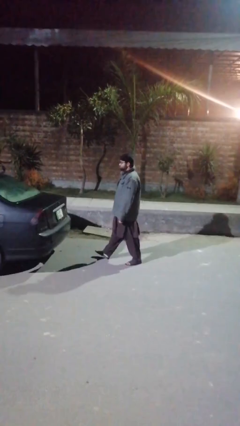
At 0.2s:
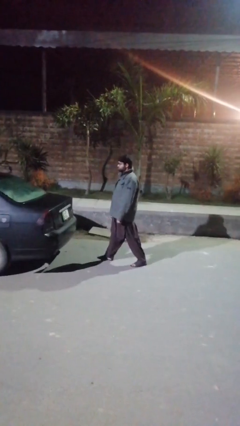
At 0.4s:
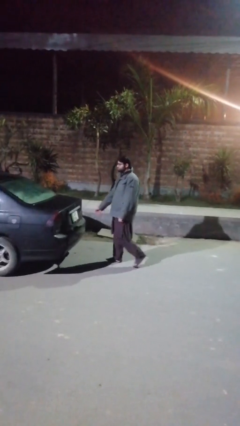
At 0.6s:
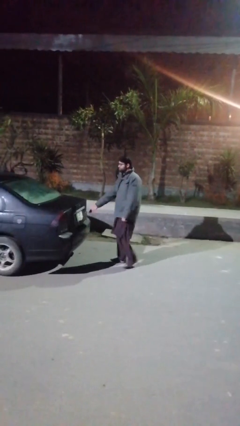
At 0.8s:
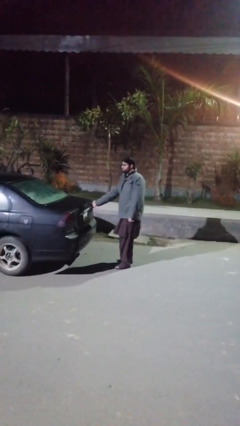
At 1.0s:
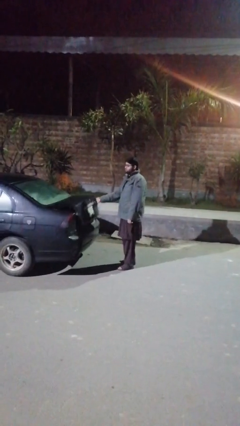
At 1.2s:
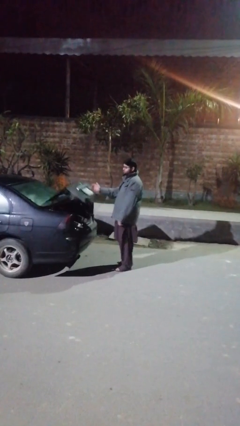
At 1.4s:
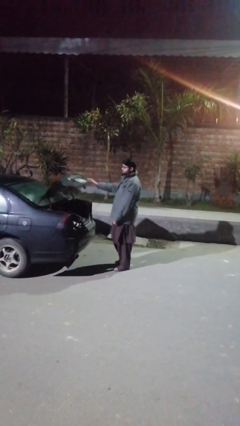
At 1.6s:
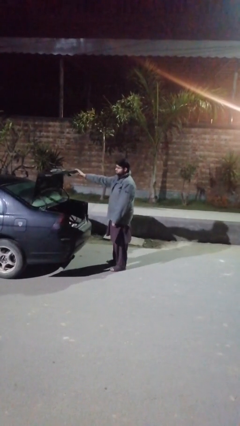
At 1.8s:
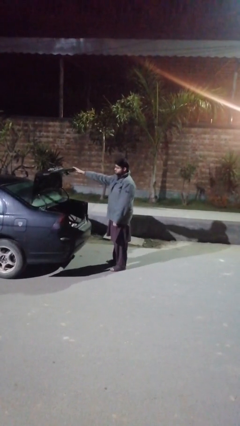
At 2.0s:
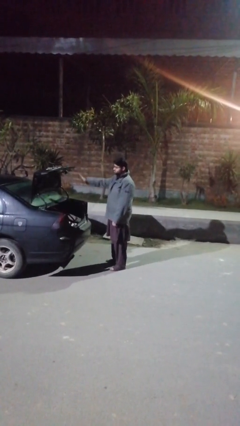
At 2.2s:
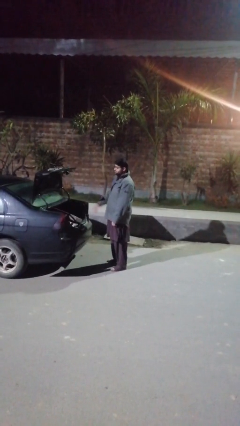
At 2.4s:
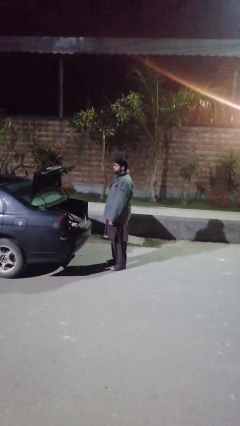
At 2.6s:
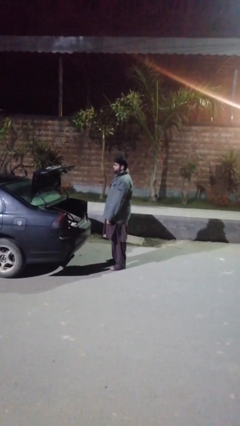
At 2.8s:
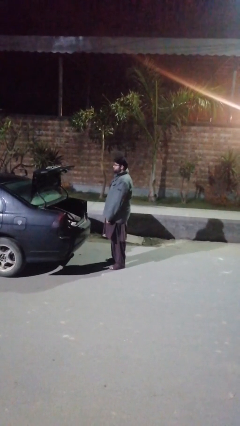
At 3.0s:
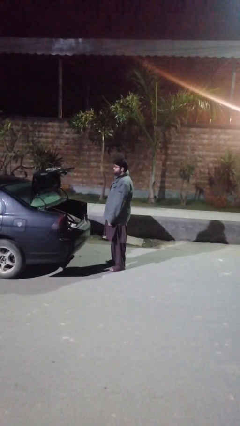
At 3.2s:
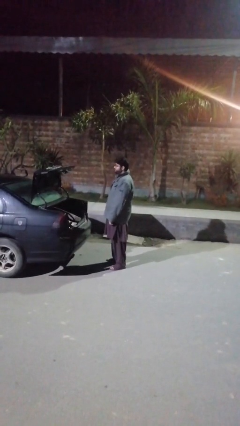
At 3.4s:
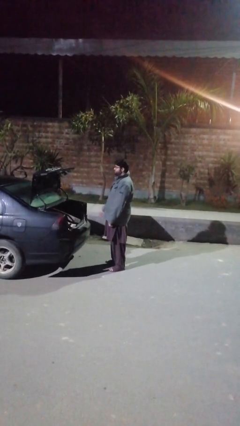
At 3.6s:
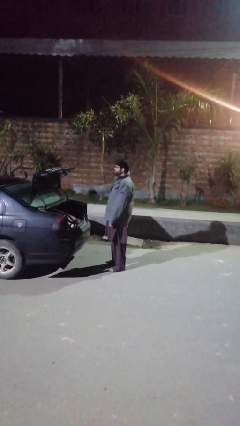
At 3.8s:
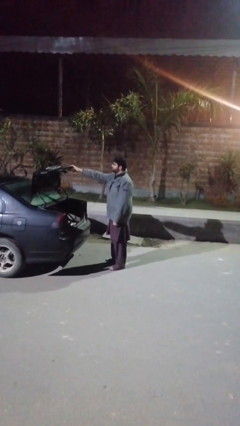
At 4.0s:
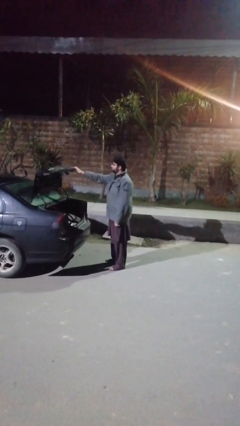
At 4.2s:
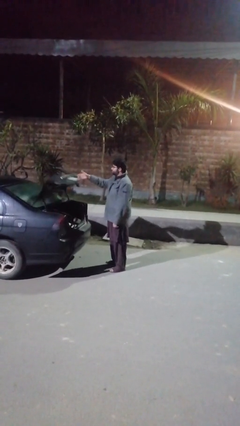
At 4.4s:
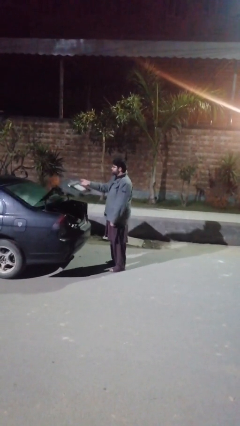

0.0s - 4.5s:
person opens car trunk

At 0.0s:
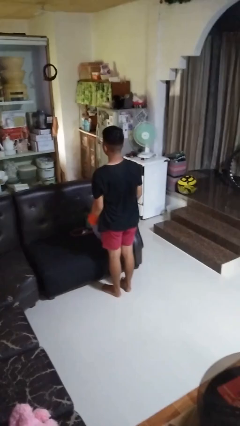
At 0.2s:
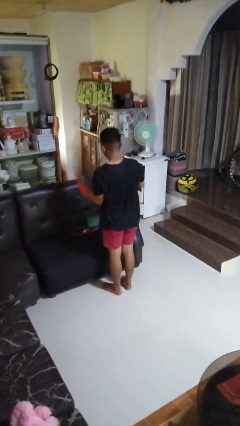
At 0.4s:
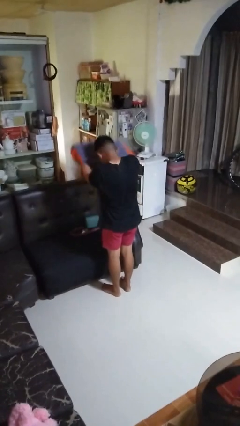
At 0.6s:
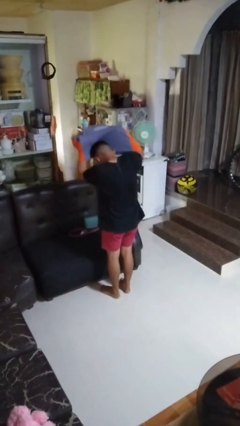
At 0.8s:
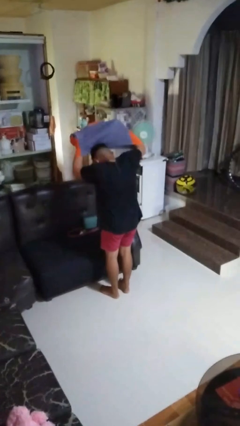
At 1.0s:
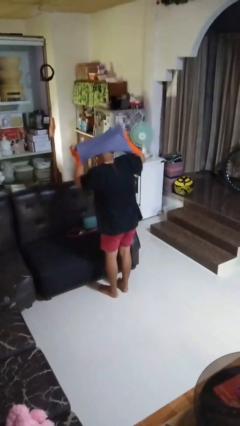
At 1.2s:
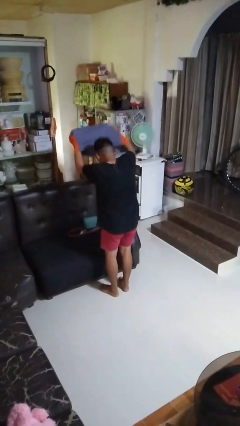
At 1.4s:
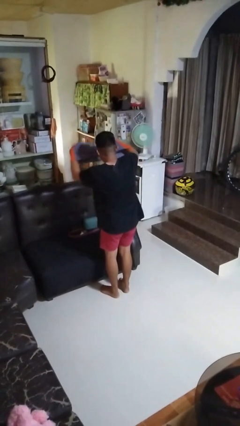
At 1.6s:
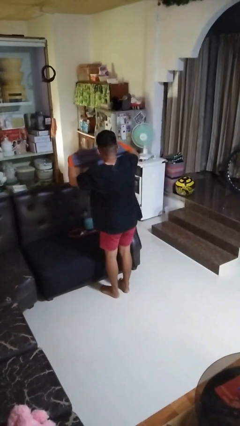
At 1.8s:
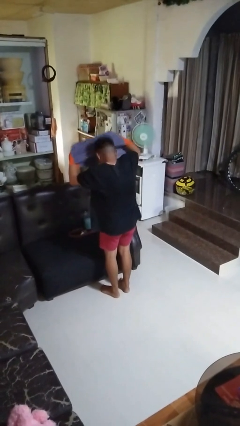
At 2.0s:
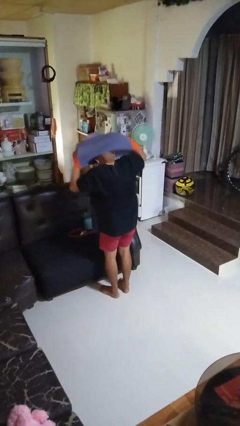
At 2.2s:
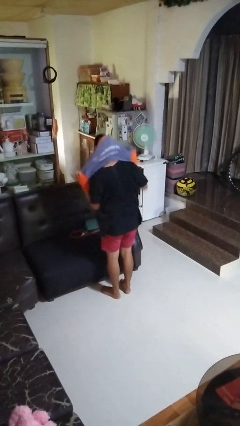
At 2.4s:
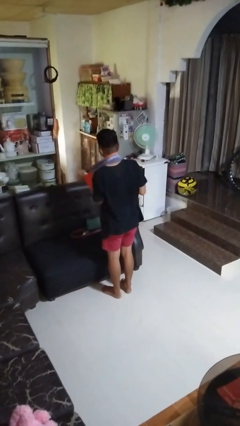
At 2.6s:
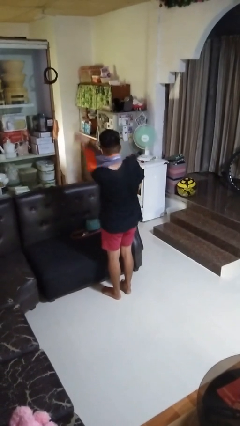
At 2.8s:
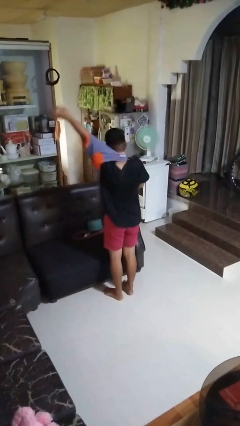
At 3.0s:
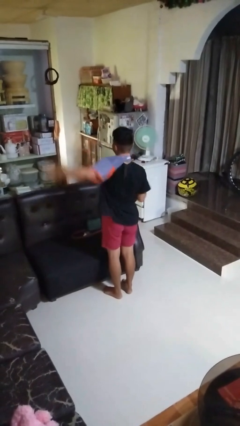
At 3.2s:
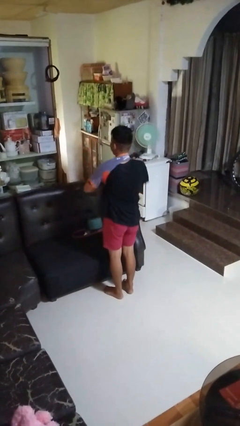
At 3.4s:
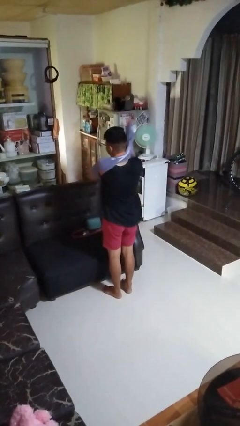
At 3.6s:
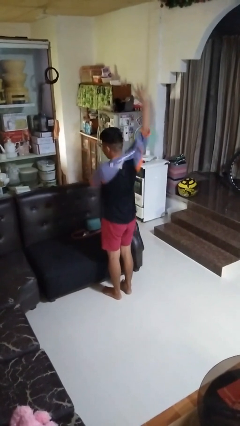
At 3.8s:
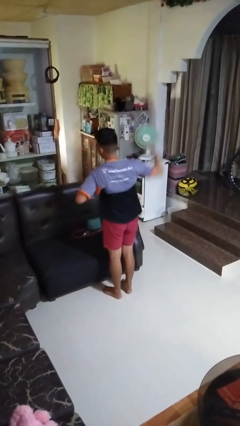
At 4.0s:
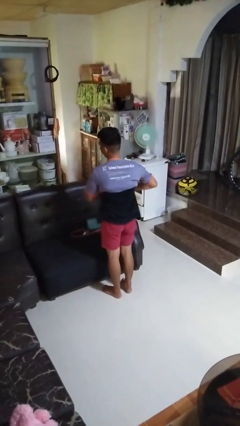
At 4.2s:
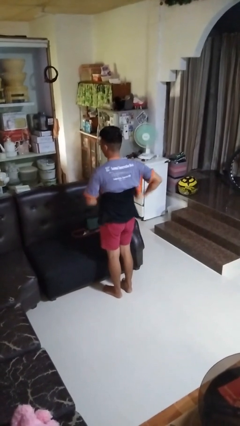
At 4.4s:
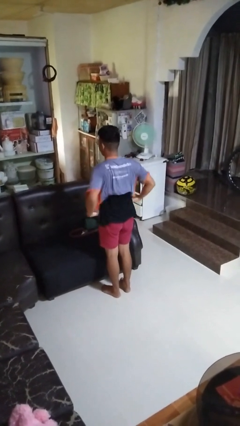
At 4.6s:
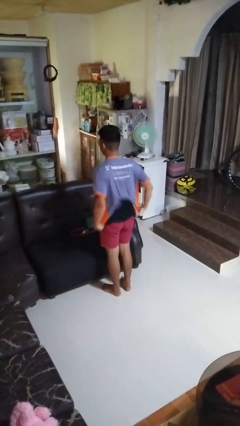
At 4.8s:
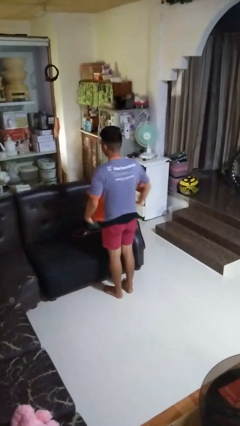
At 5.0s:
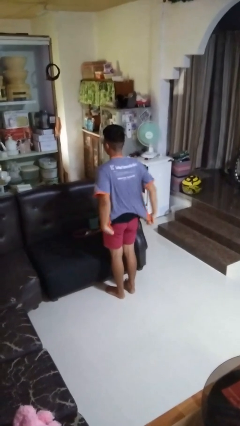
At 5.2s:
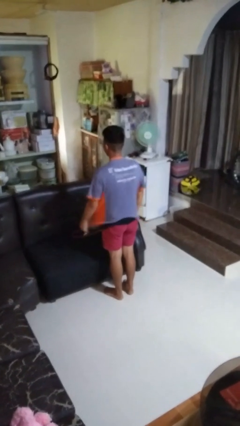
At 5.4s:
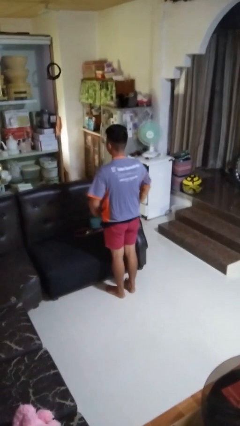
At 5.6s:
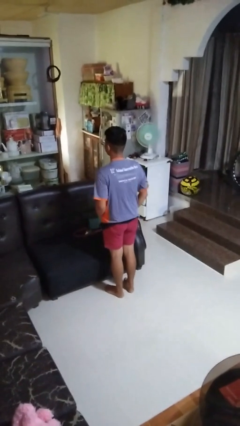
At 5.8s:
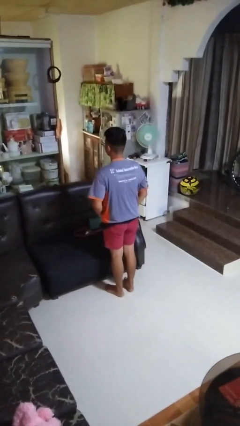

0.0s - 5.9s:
person puts on shirt

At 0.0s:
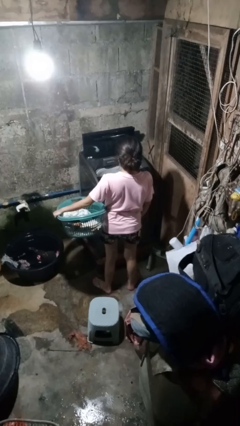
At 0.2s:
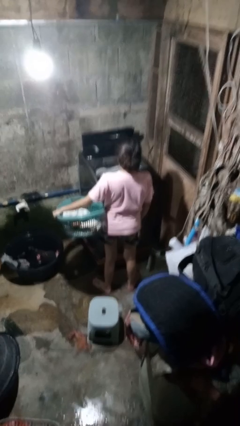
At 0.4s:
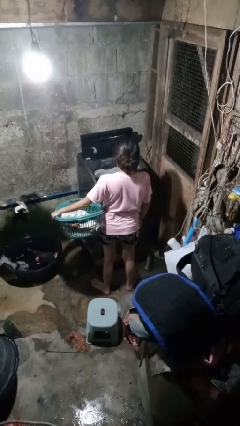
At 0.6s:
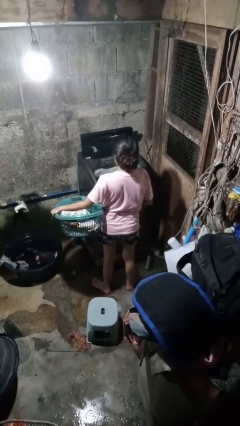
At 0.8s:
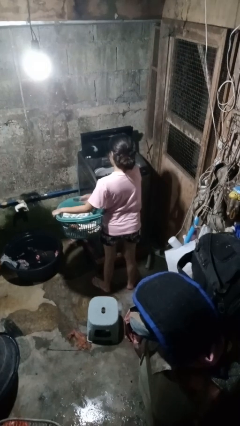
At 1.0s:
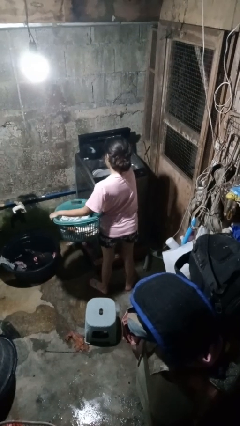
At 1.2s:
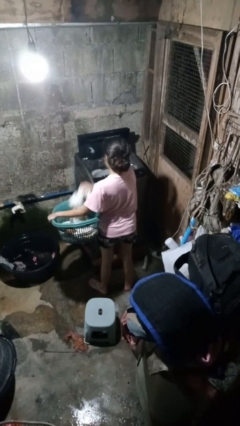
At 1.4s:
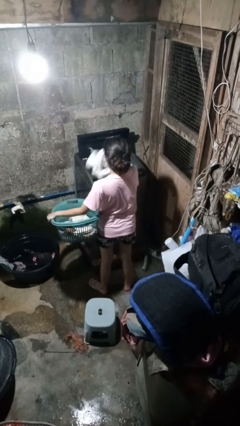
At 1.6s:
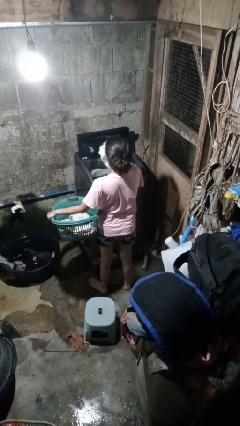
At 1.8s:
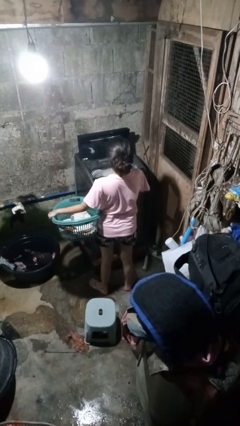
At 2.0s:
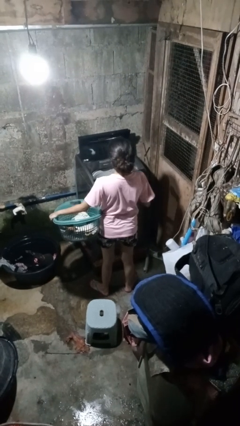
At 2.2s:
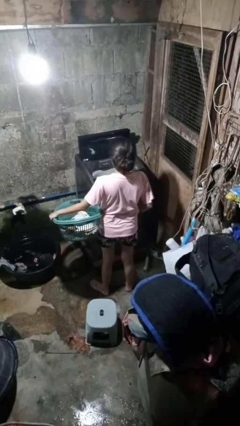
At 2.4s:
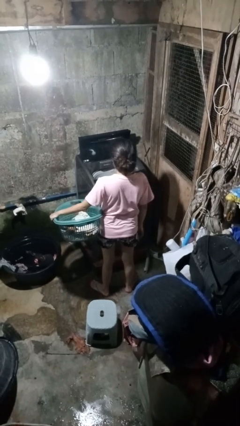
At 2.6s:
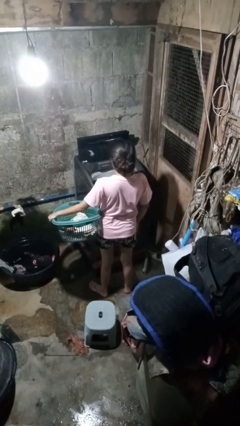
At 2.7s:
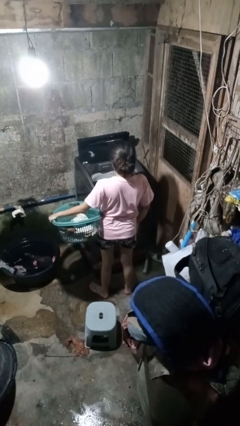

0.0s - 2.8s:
person loads dryer

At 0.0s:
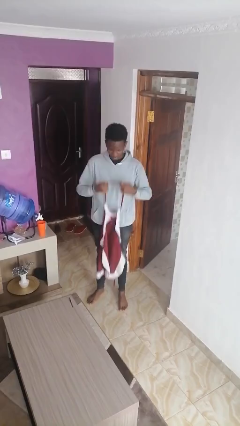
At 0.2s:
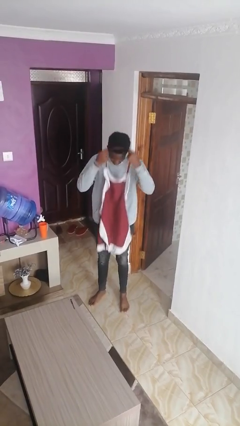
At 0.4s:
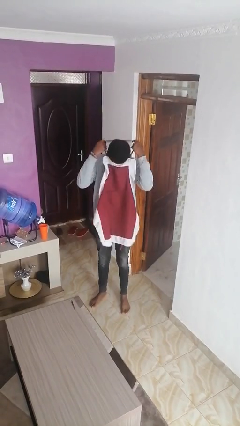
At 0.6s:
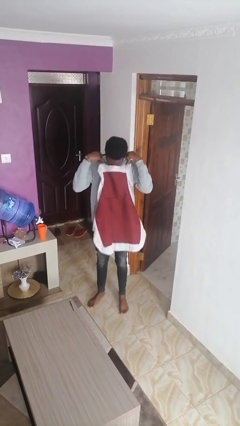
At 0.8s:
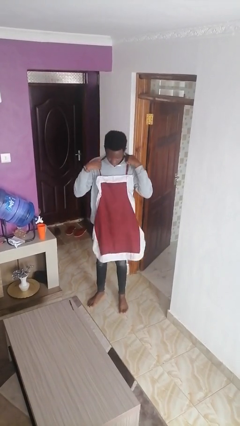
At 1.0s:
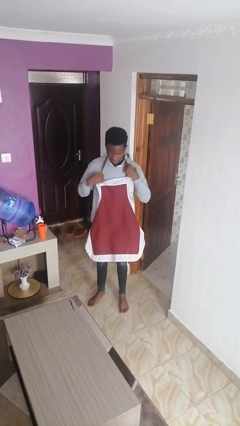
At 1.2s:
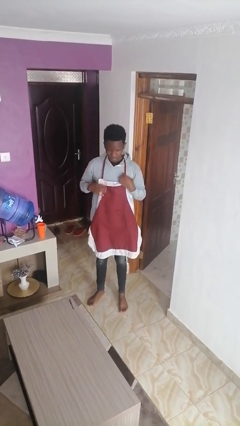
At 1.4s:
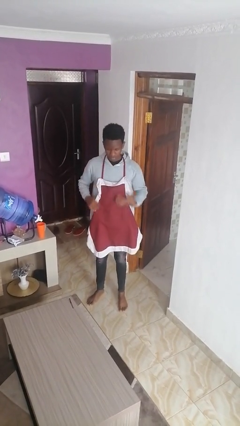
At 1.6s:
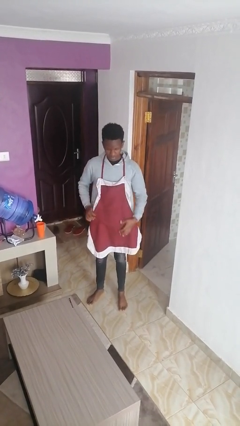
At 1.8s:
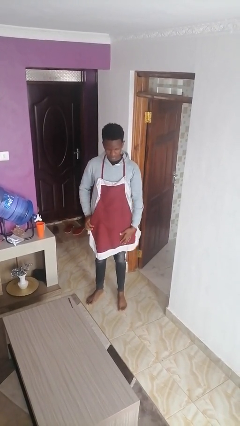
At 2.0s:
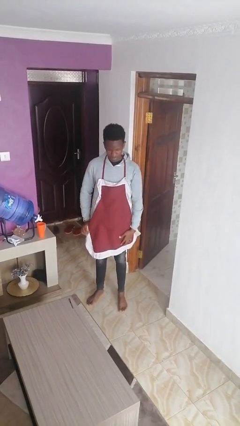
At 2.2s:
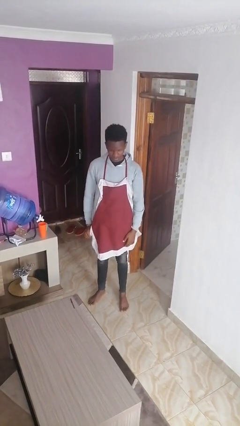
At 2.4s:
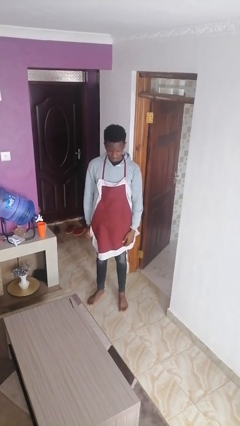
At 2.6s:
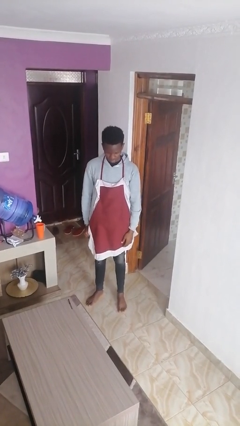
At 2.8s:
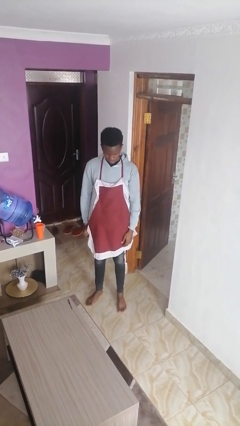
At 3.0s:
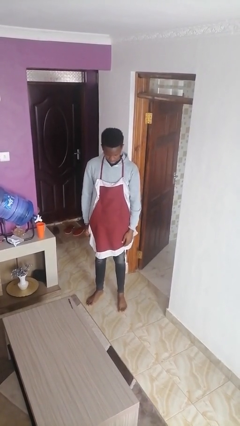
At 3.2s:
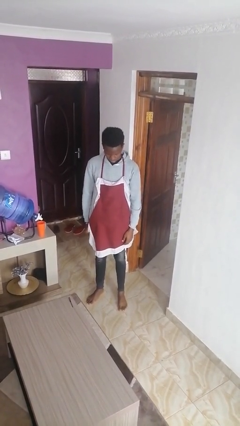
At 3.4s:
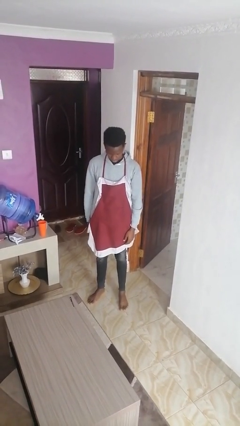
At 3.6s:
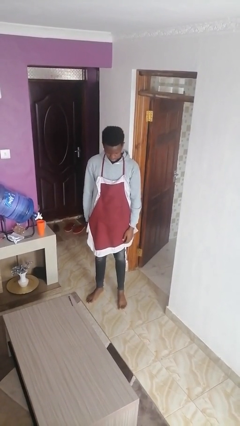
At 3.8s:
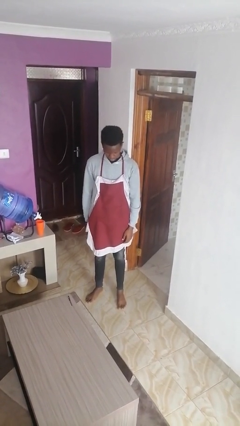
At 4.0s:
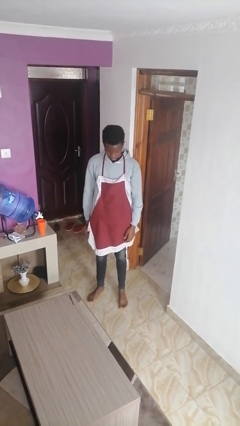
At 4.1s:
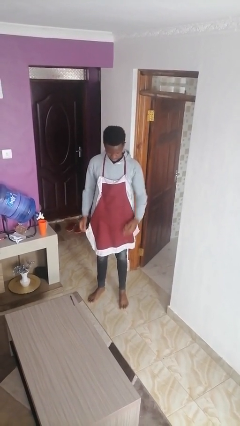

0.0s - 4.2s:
person puts on apron

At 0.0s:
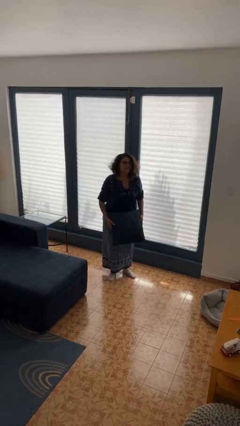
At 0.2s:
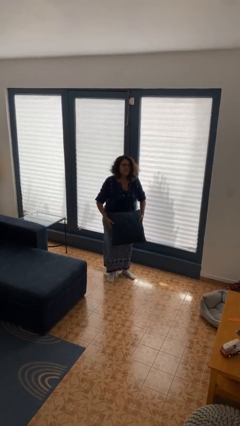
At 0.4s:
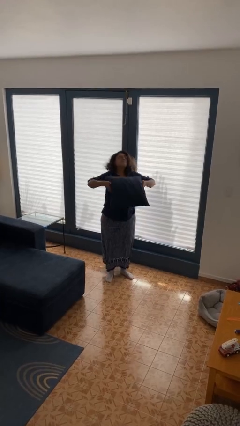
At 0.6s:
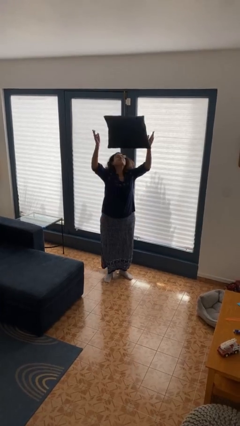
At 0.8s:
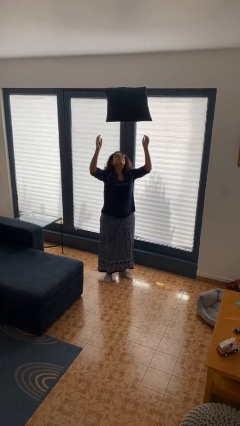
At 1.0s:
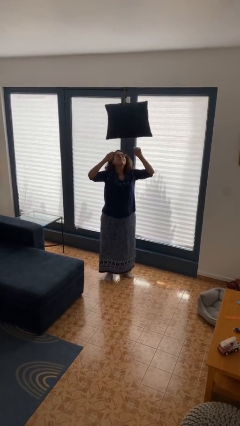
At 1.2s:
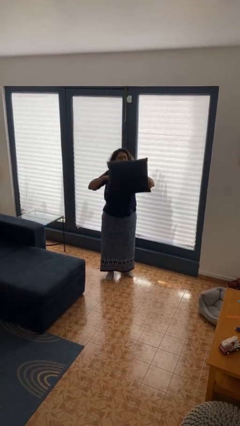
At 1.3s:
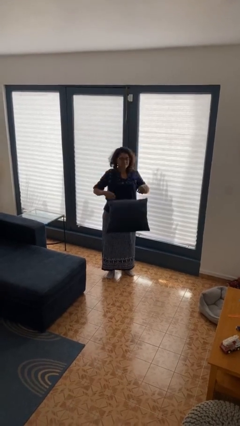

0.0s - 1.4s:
person throws object into air
